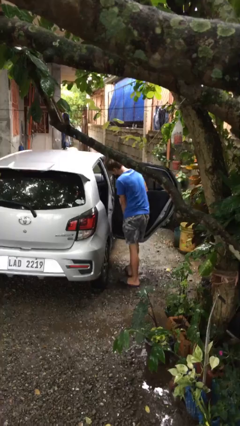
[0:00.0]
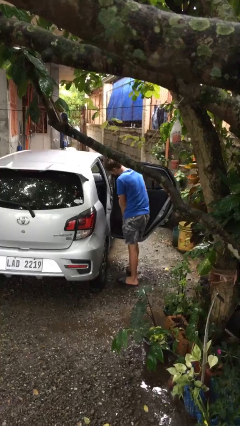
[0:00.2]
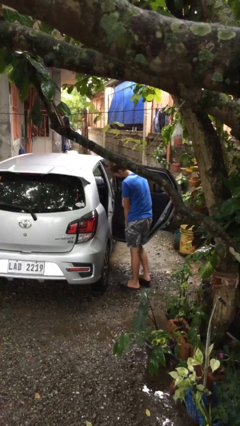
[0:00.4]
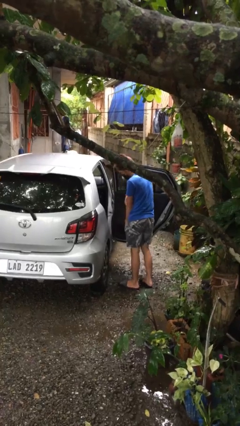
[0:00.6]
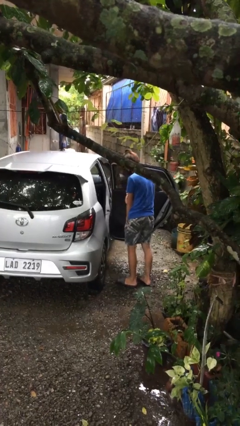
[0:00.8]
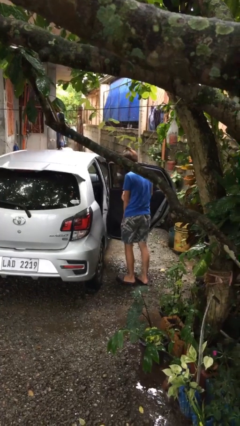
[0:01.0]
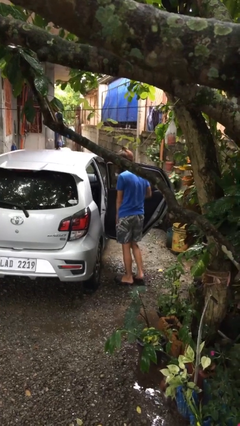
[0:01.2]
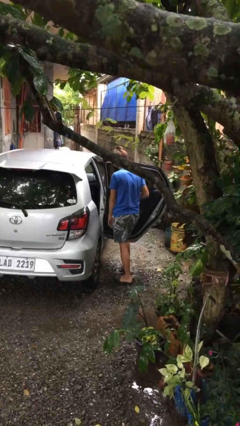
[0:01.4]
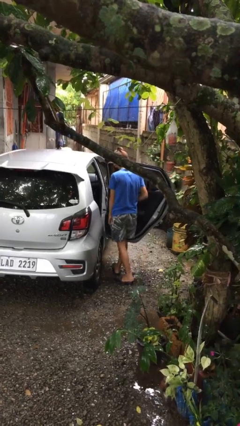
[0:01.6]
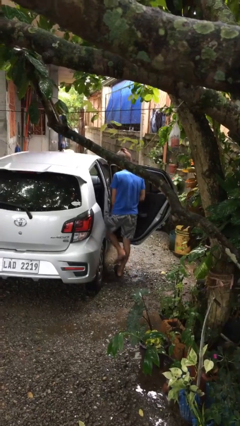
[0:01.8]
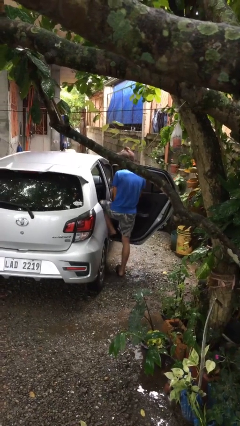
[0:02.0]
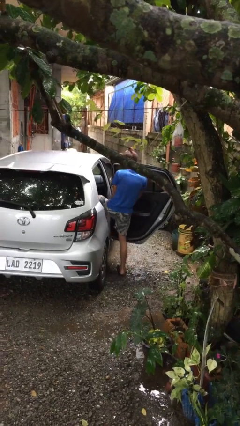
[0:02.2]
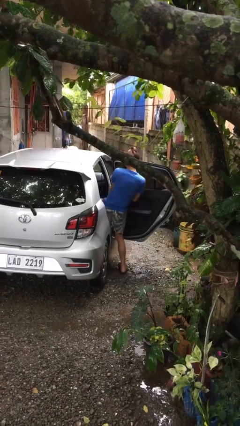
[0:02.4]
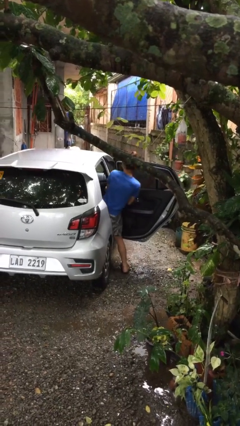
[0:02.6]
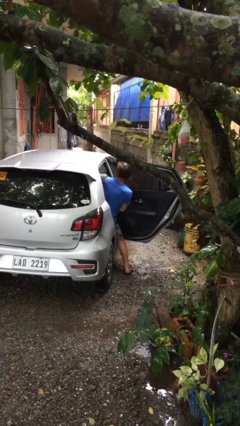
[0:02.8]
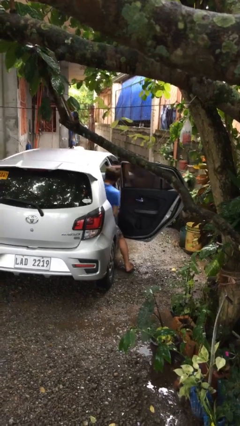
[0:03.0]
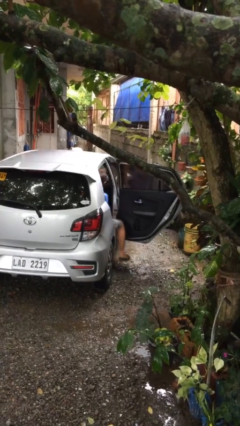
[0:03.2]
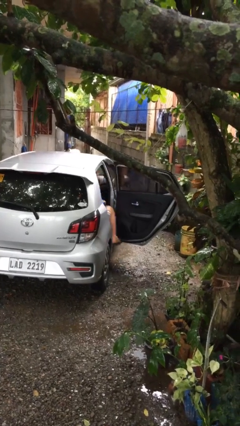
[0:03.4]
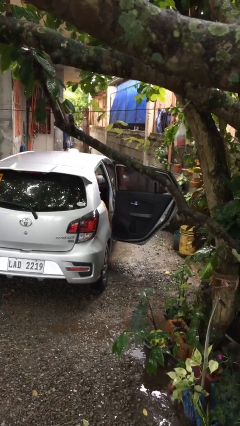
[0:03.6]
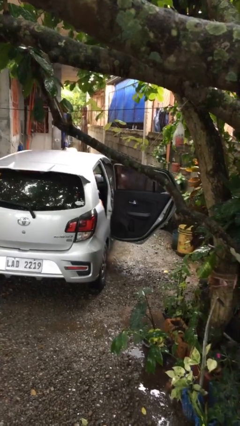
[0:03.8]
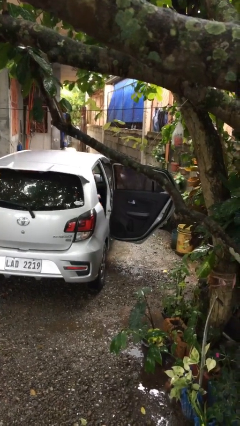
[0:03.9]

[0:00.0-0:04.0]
person enters car

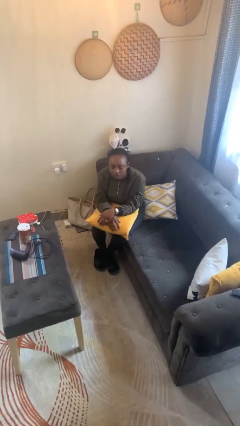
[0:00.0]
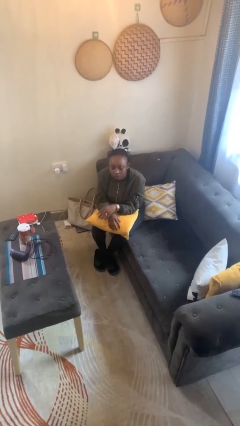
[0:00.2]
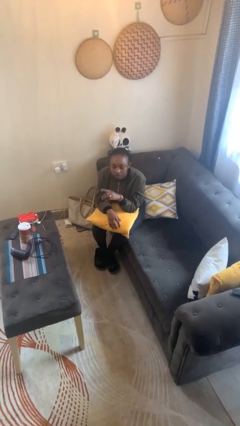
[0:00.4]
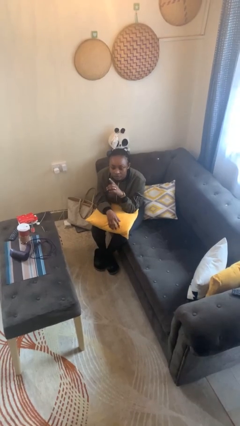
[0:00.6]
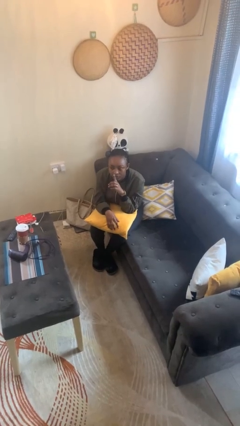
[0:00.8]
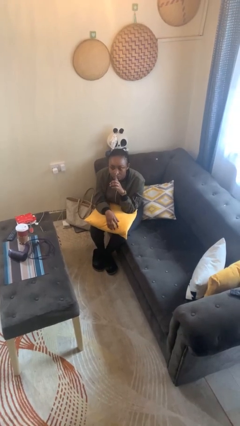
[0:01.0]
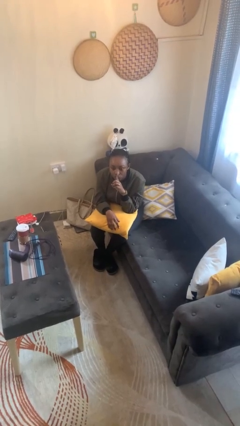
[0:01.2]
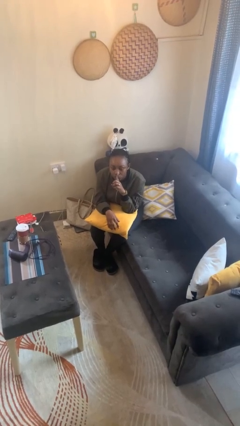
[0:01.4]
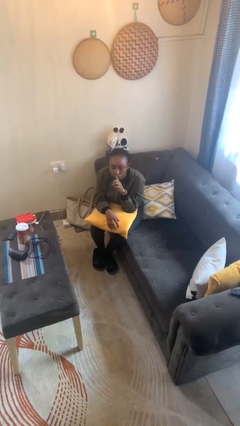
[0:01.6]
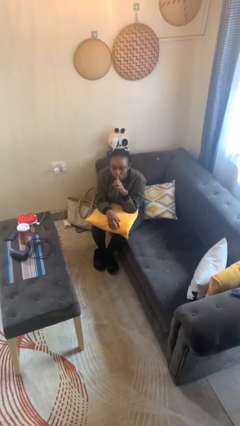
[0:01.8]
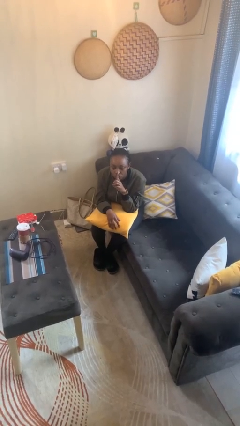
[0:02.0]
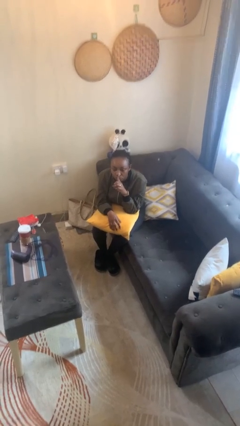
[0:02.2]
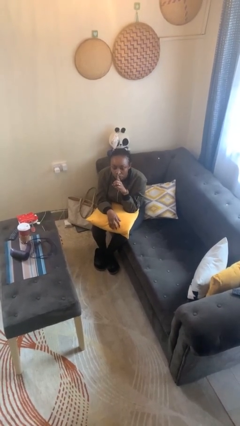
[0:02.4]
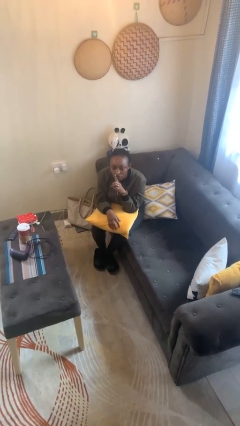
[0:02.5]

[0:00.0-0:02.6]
person gestures be quiet

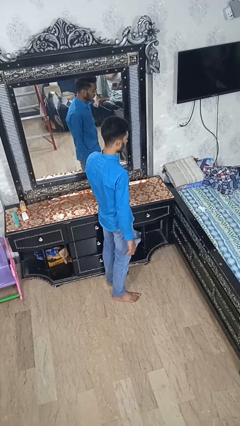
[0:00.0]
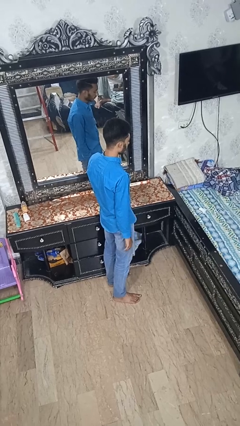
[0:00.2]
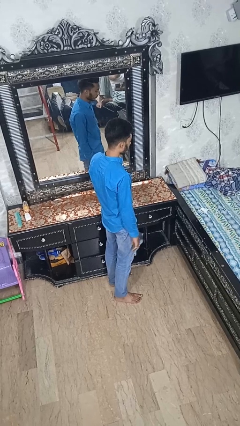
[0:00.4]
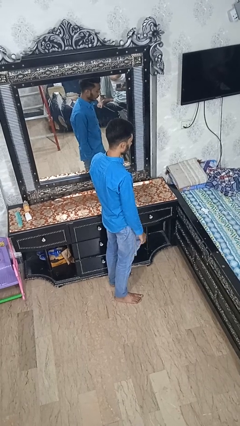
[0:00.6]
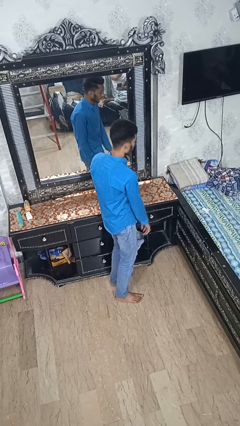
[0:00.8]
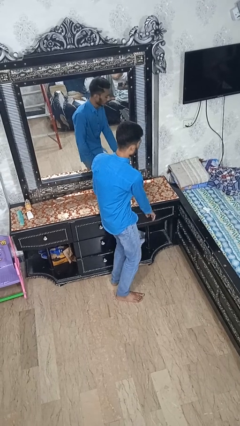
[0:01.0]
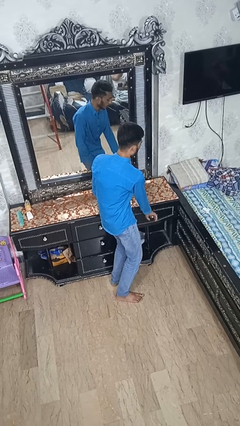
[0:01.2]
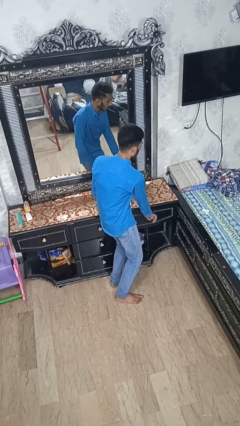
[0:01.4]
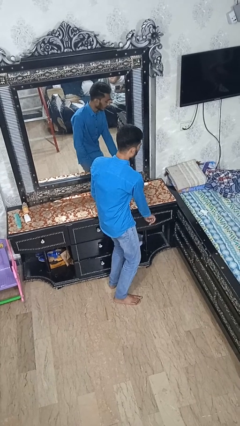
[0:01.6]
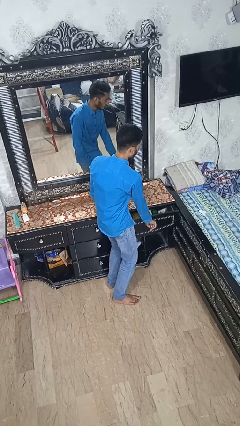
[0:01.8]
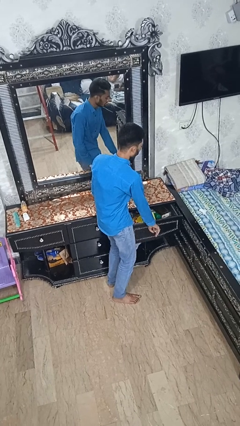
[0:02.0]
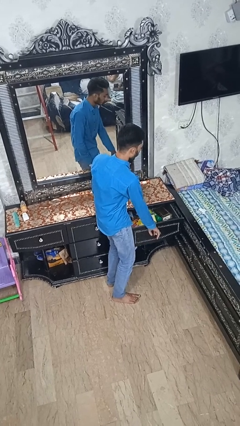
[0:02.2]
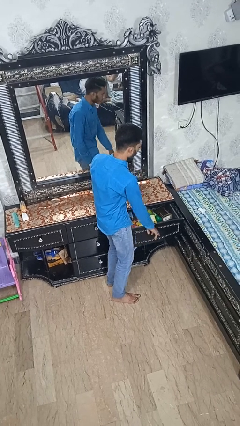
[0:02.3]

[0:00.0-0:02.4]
person opens dresser drawer

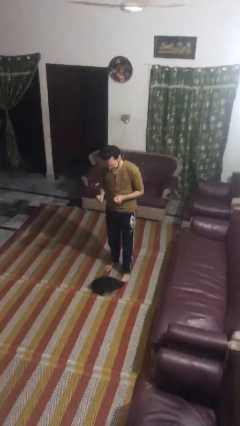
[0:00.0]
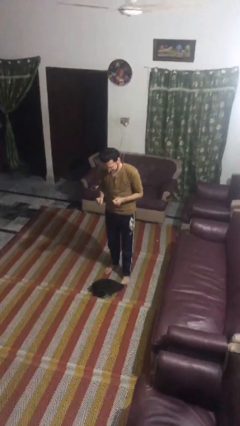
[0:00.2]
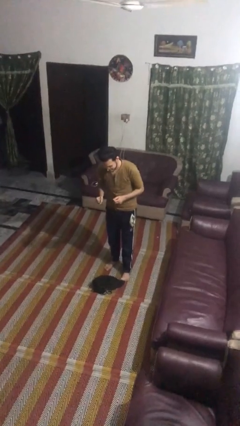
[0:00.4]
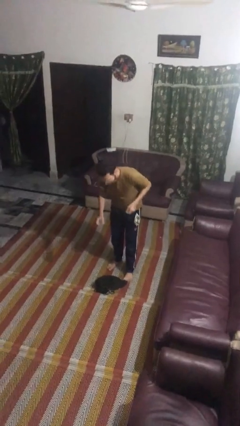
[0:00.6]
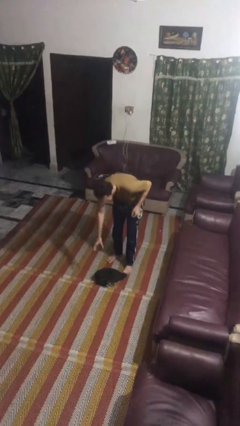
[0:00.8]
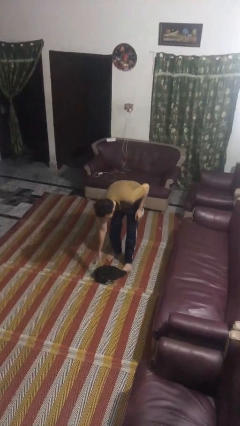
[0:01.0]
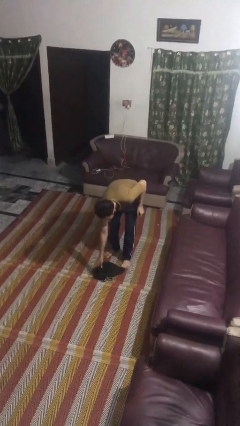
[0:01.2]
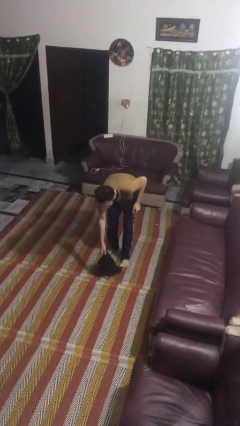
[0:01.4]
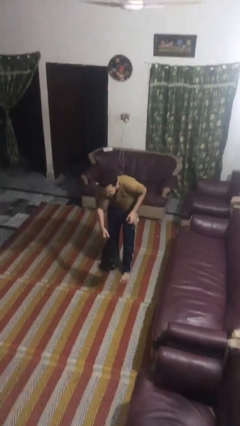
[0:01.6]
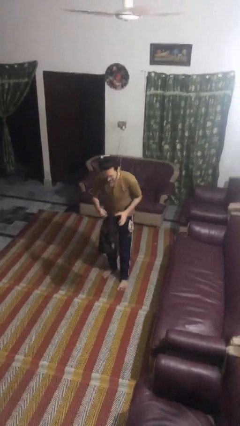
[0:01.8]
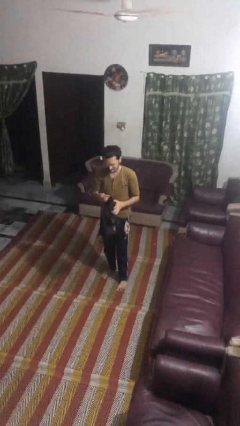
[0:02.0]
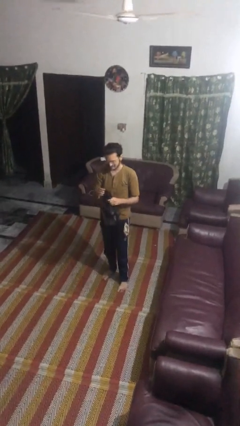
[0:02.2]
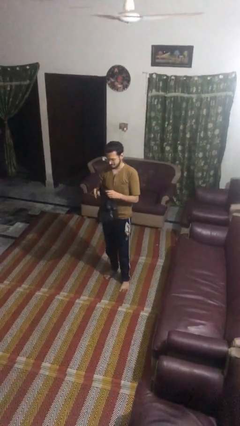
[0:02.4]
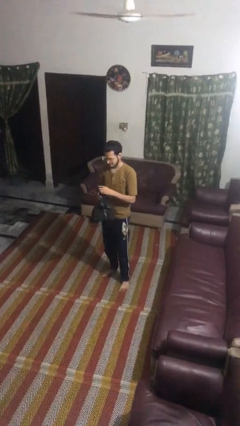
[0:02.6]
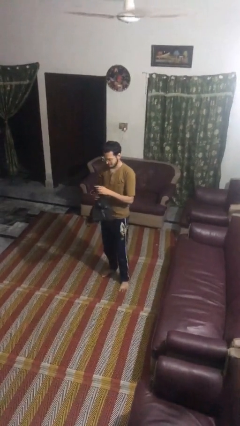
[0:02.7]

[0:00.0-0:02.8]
person picks up object from floor

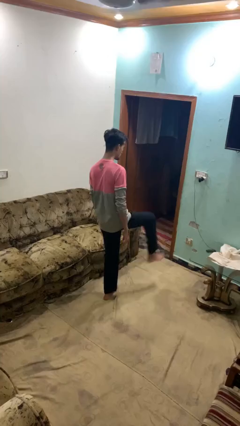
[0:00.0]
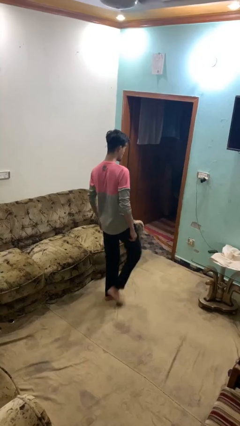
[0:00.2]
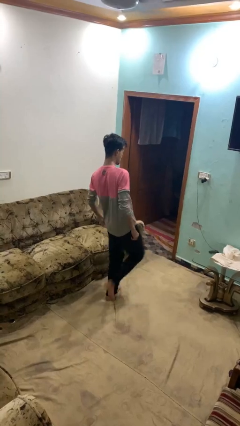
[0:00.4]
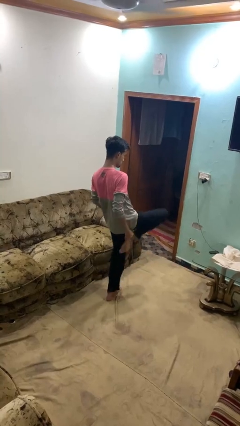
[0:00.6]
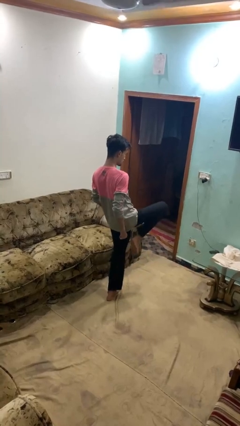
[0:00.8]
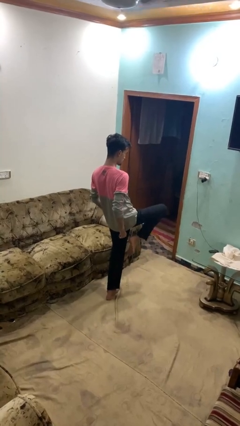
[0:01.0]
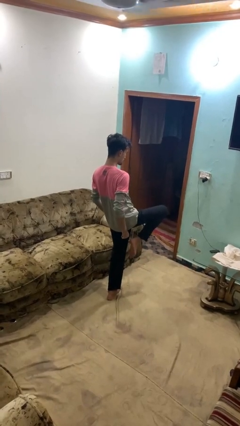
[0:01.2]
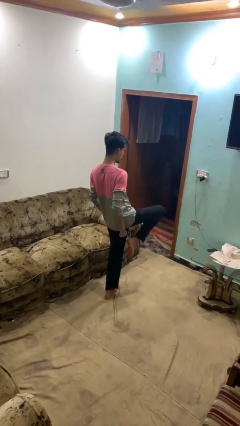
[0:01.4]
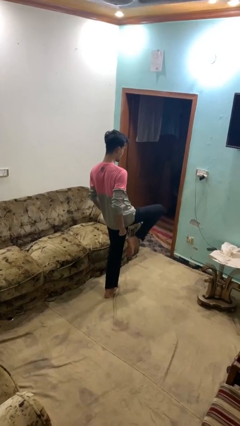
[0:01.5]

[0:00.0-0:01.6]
person karate chop

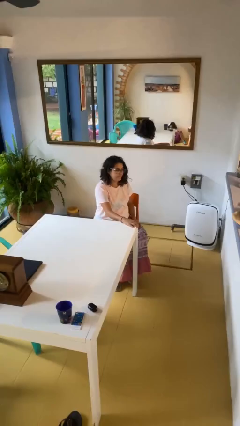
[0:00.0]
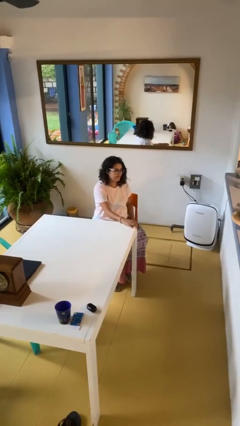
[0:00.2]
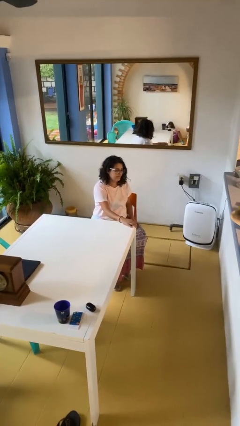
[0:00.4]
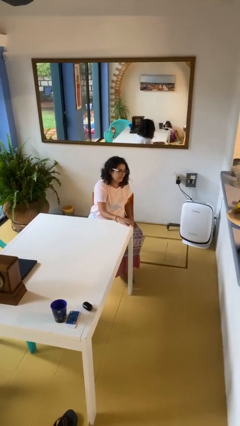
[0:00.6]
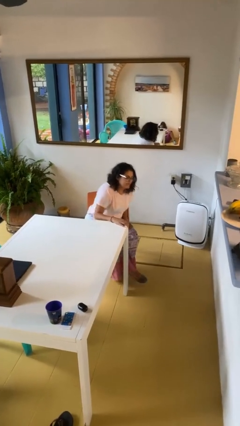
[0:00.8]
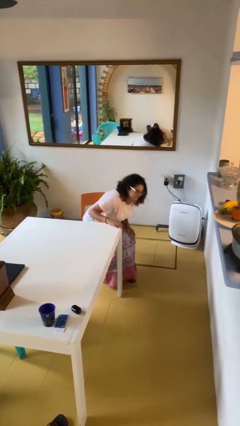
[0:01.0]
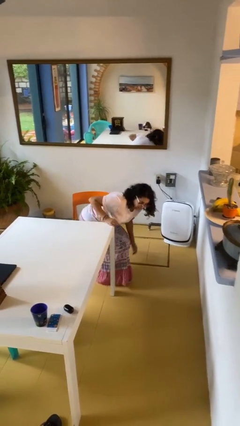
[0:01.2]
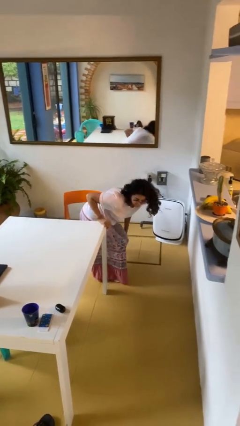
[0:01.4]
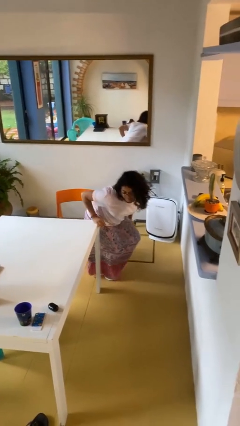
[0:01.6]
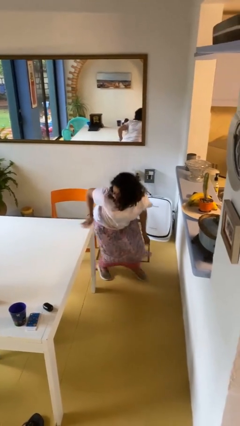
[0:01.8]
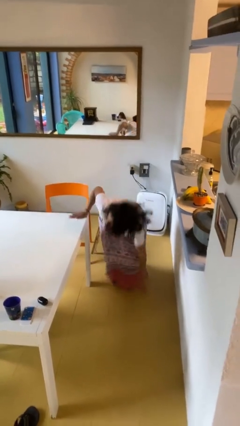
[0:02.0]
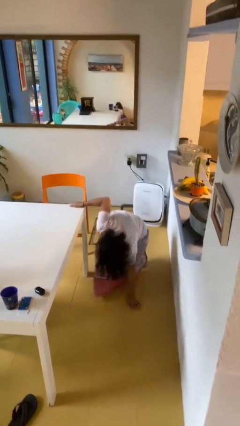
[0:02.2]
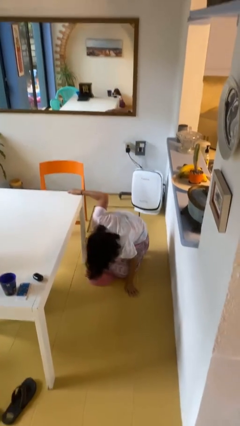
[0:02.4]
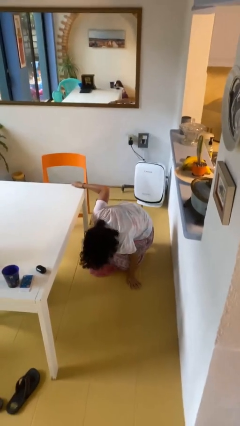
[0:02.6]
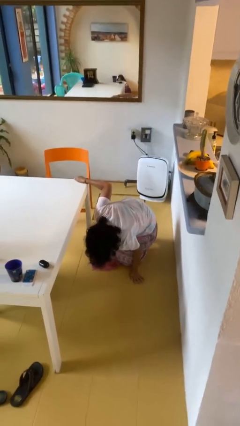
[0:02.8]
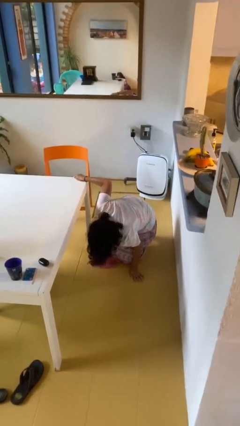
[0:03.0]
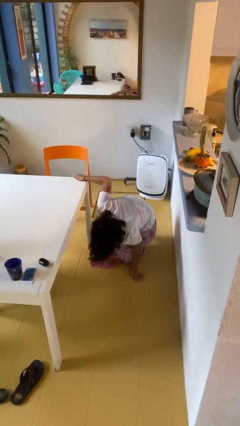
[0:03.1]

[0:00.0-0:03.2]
person falls from chair

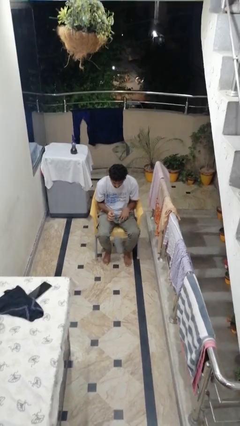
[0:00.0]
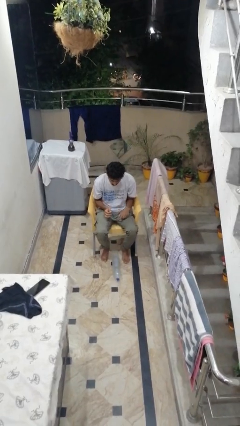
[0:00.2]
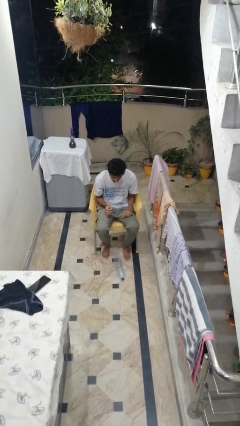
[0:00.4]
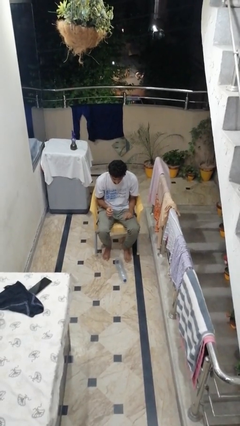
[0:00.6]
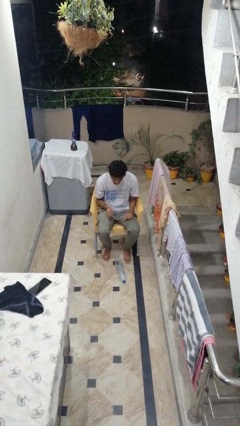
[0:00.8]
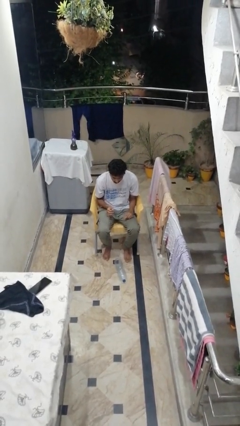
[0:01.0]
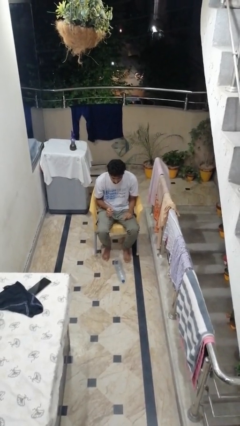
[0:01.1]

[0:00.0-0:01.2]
person drops object
